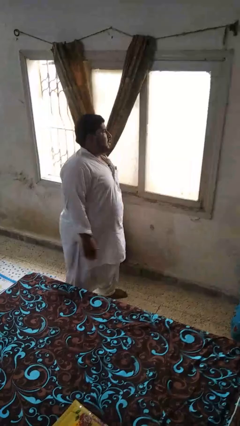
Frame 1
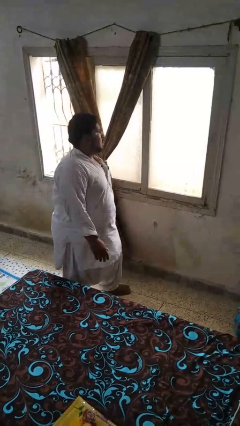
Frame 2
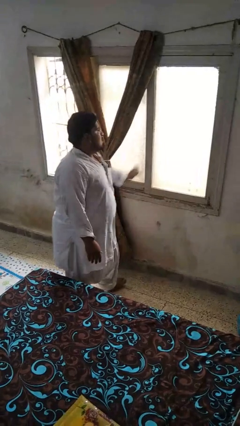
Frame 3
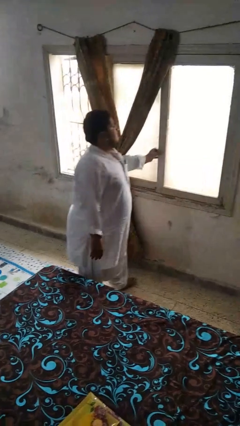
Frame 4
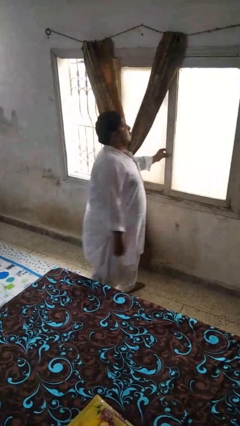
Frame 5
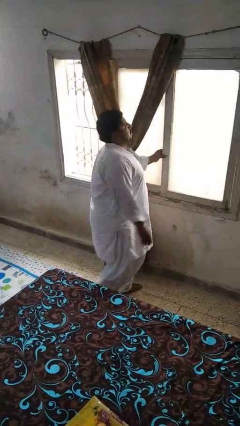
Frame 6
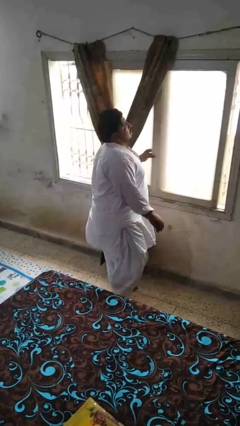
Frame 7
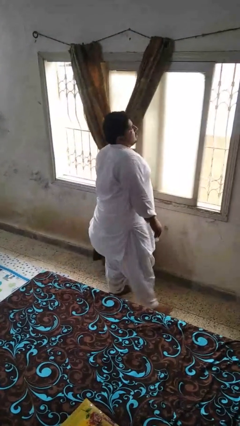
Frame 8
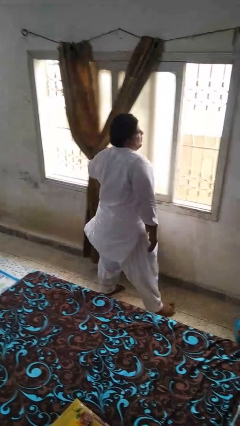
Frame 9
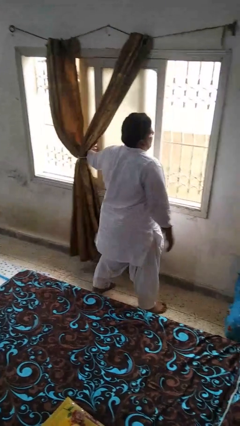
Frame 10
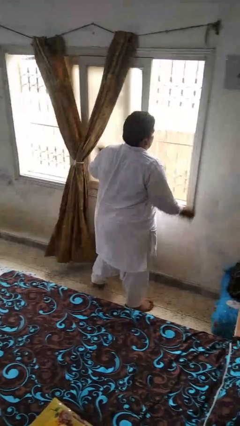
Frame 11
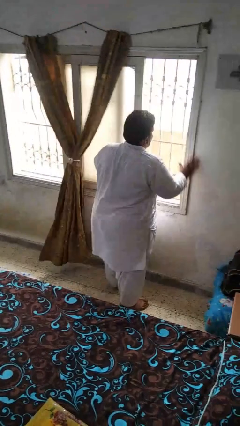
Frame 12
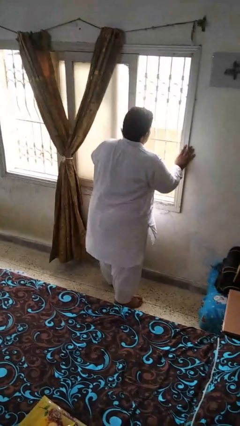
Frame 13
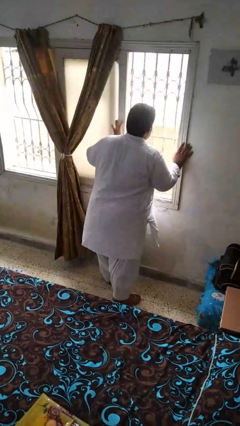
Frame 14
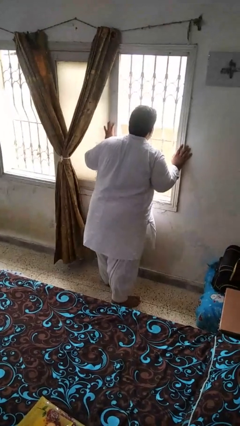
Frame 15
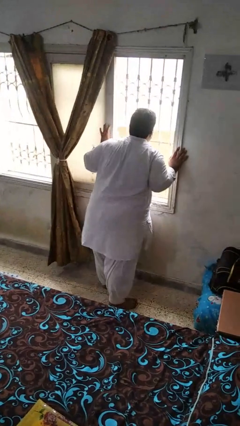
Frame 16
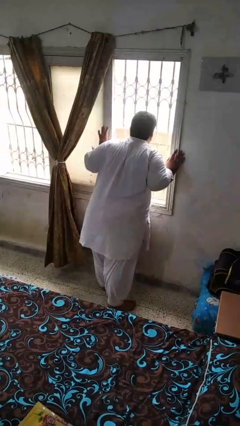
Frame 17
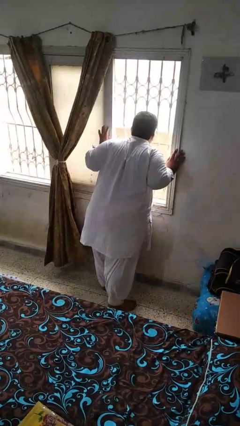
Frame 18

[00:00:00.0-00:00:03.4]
person opens home window

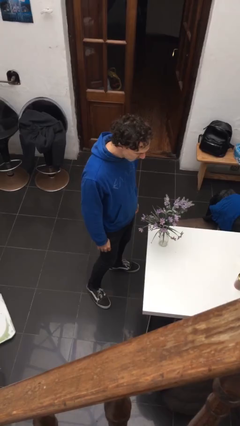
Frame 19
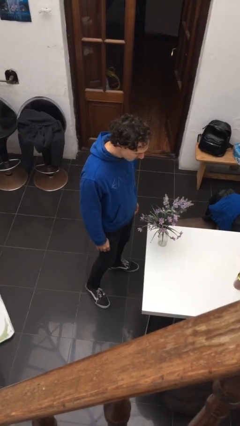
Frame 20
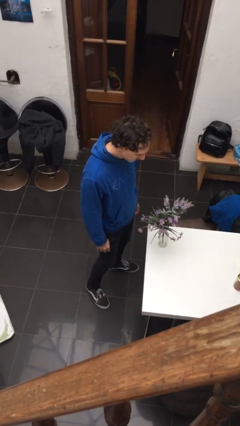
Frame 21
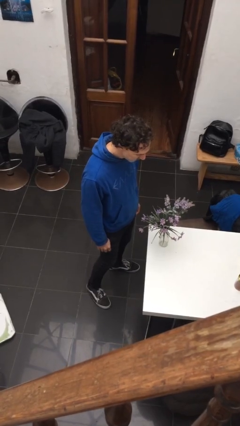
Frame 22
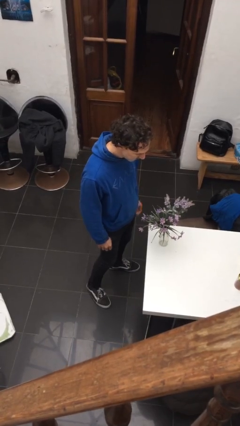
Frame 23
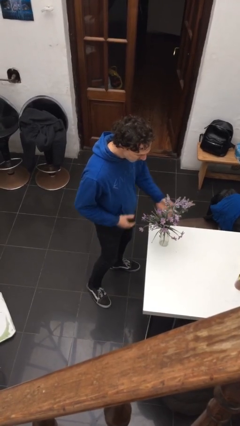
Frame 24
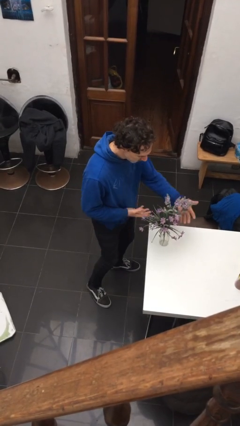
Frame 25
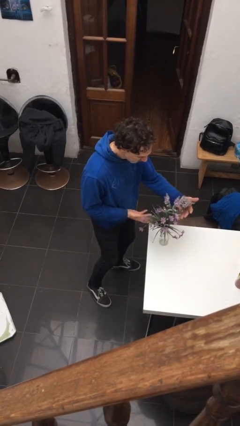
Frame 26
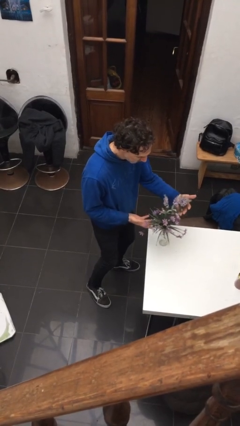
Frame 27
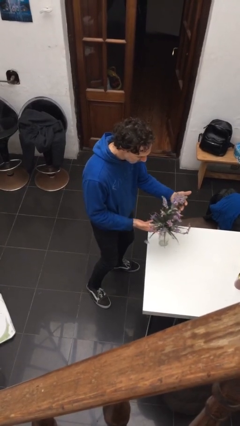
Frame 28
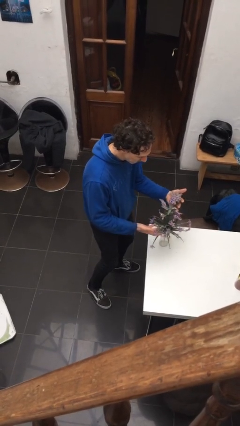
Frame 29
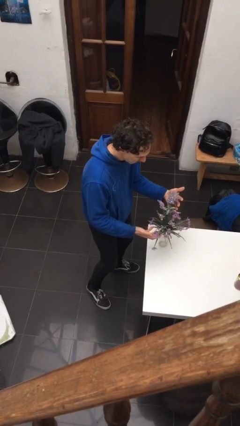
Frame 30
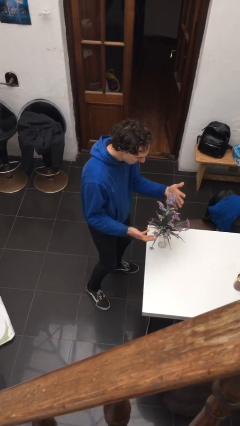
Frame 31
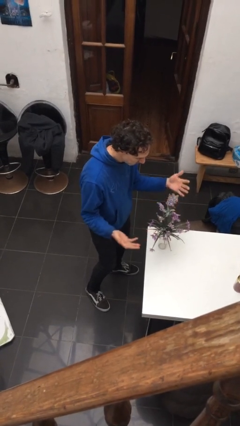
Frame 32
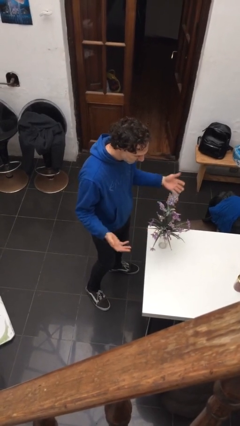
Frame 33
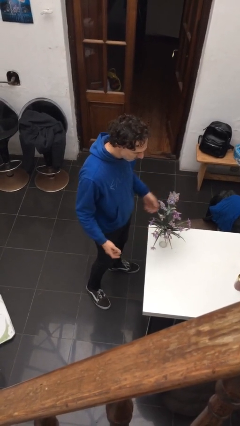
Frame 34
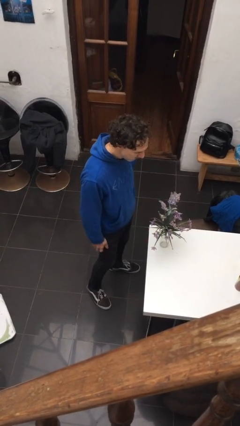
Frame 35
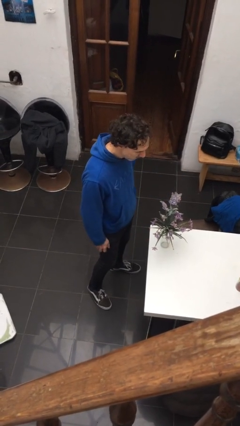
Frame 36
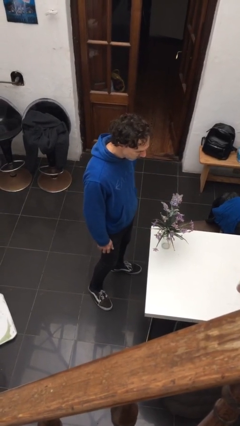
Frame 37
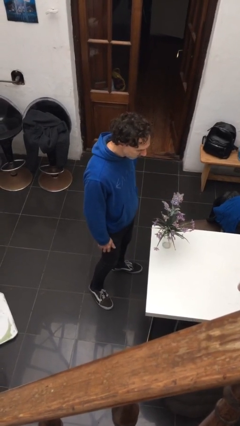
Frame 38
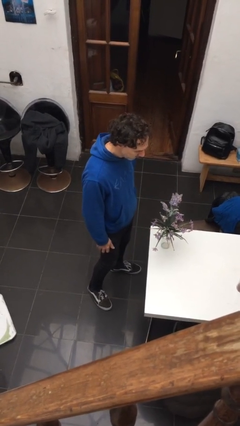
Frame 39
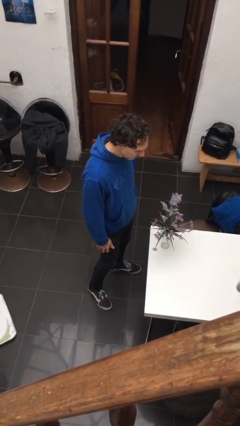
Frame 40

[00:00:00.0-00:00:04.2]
person arranges flowers in vase

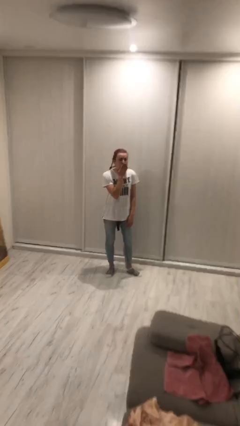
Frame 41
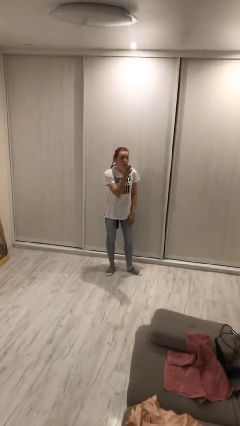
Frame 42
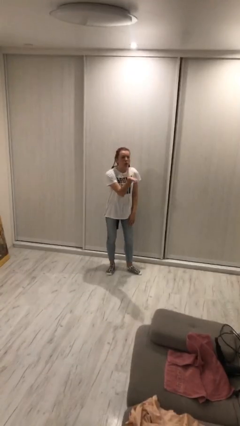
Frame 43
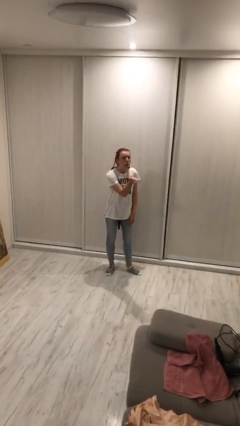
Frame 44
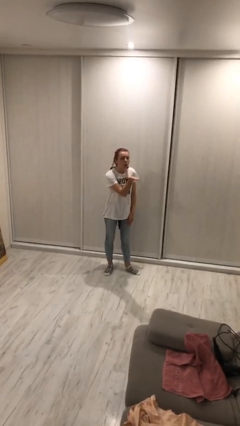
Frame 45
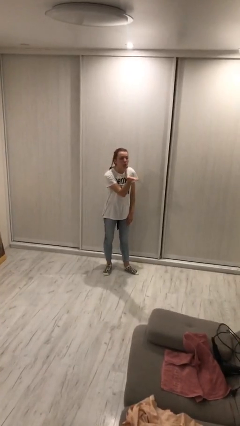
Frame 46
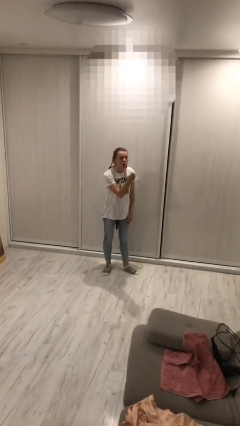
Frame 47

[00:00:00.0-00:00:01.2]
person gestures blow kiss

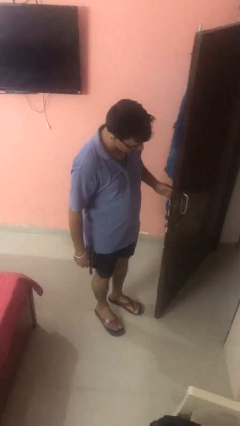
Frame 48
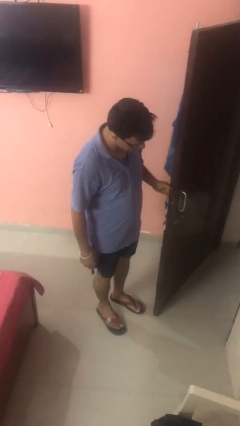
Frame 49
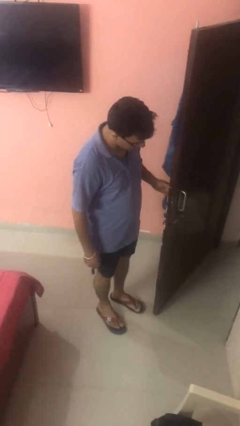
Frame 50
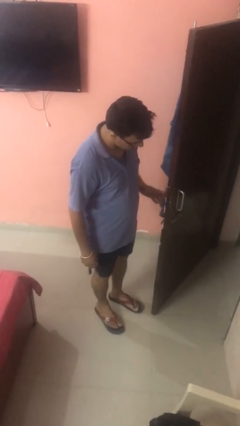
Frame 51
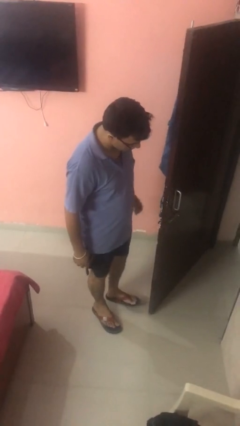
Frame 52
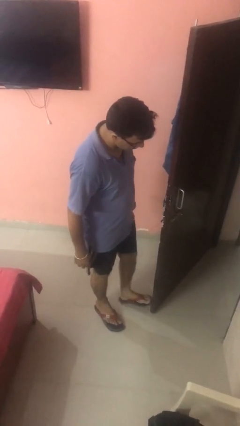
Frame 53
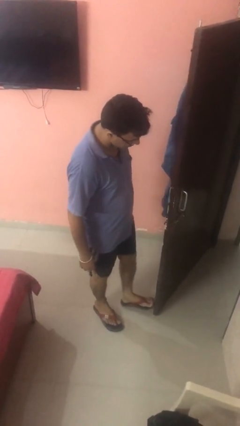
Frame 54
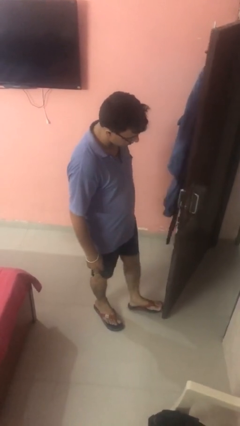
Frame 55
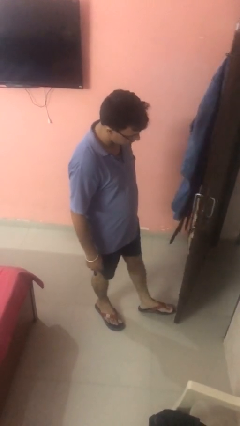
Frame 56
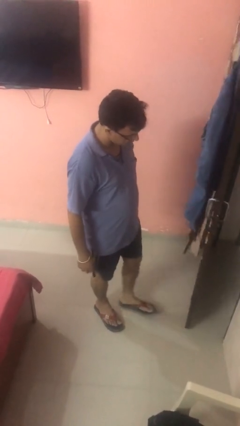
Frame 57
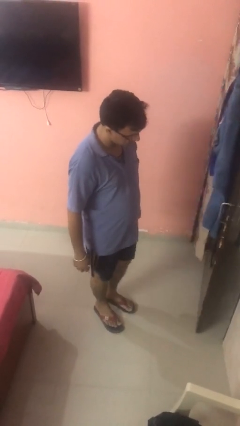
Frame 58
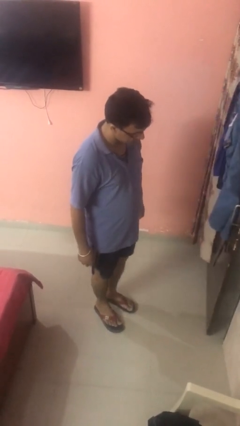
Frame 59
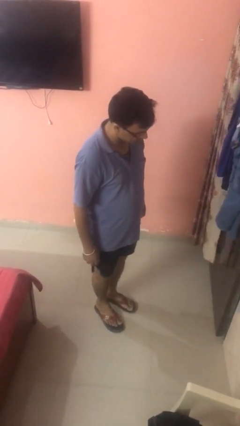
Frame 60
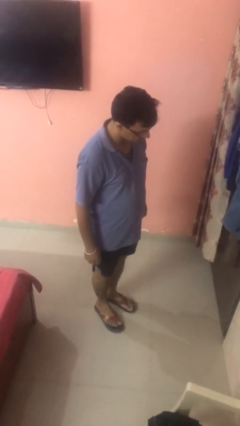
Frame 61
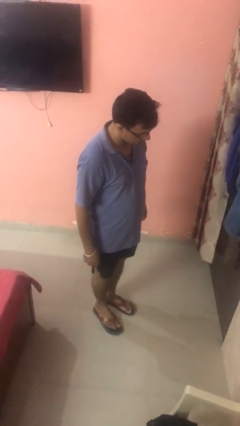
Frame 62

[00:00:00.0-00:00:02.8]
person closes door with foot

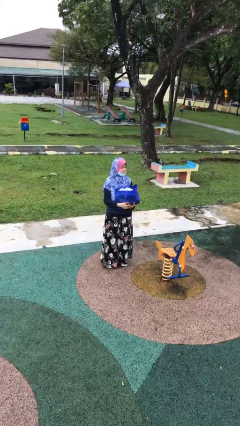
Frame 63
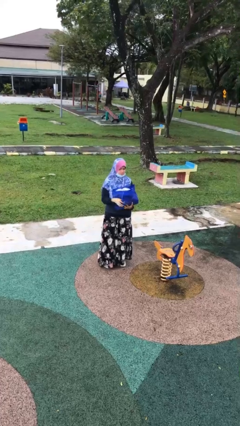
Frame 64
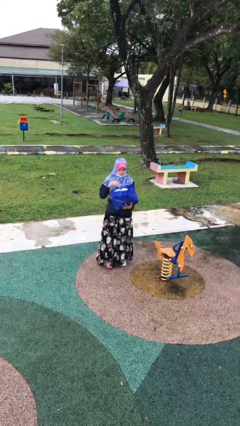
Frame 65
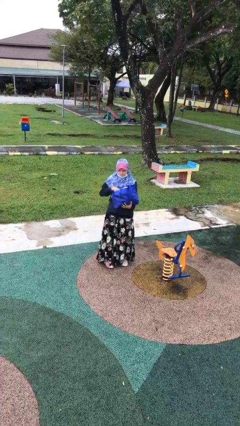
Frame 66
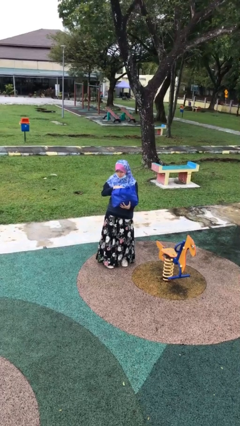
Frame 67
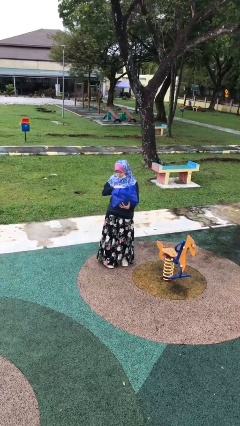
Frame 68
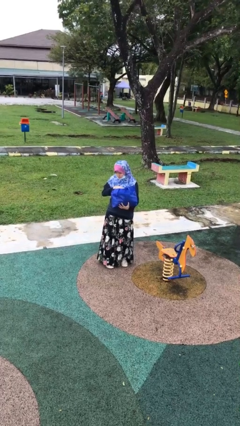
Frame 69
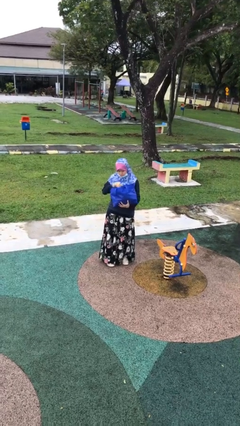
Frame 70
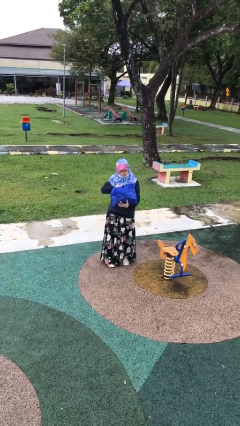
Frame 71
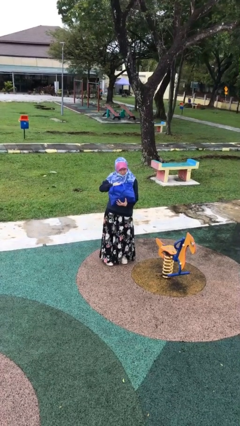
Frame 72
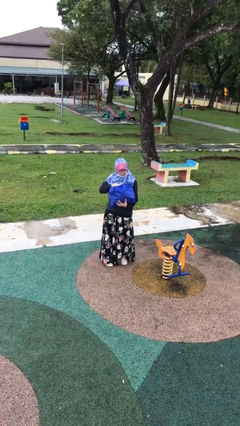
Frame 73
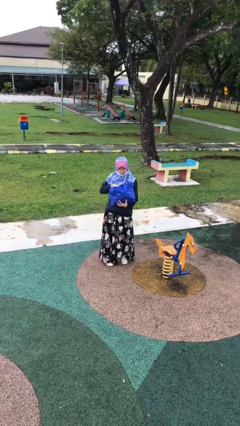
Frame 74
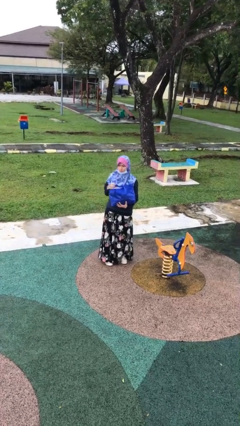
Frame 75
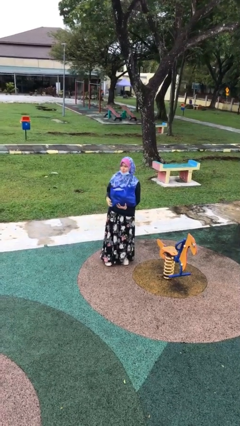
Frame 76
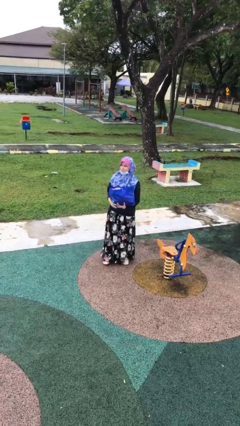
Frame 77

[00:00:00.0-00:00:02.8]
person searches in bag

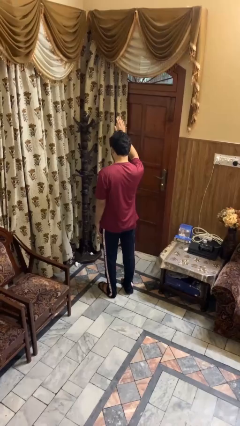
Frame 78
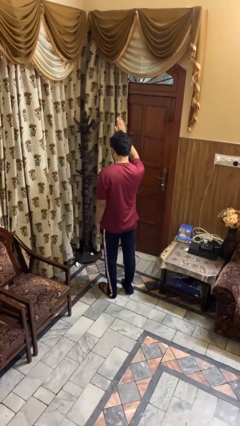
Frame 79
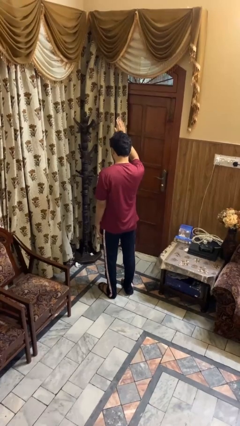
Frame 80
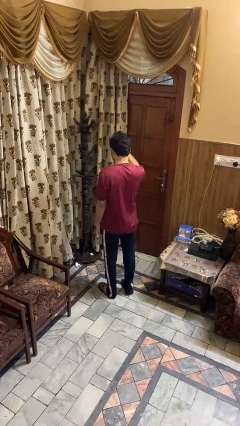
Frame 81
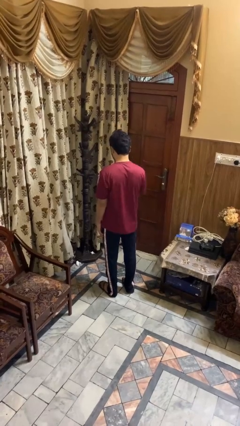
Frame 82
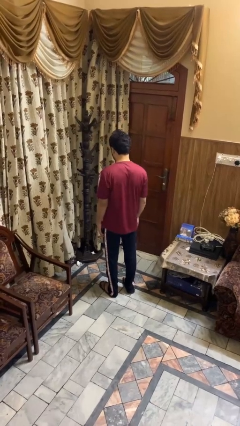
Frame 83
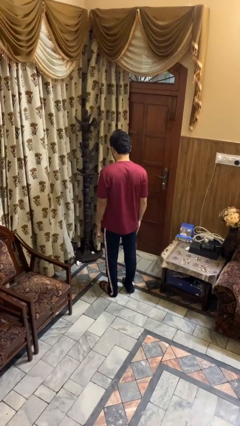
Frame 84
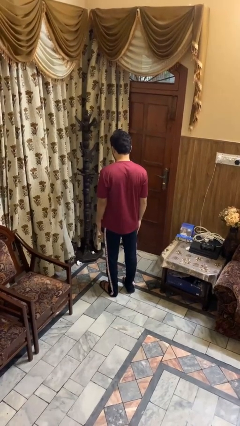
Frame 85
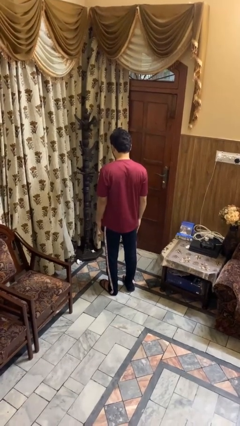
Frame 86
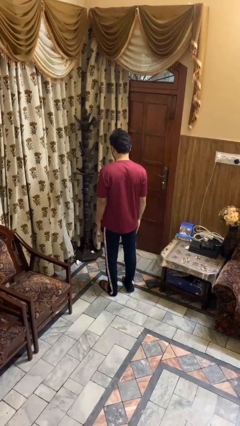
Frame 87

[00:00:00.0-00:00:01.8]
person gestures lower hand

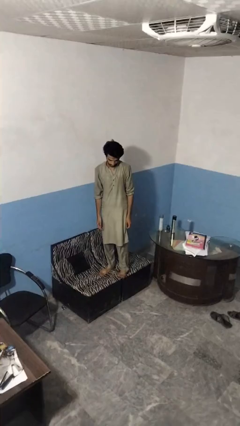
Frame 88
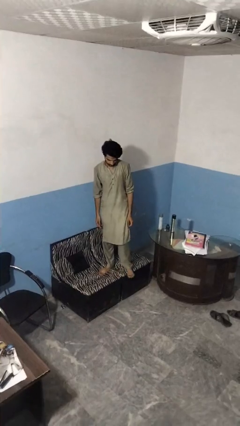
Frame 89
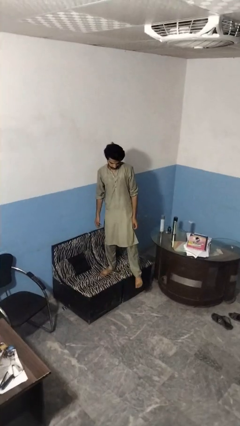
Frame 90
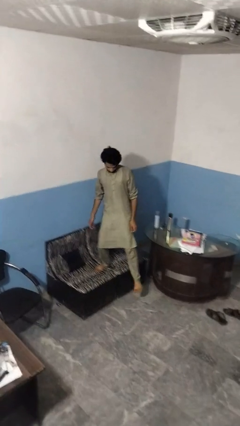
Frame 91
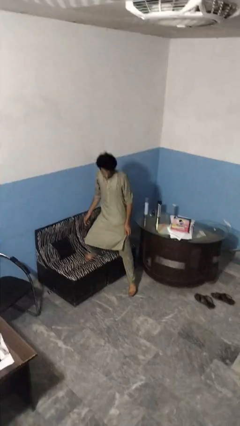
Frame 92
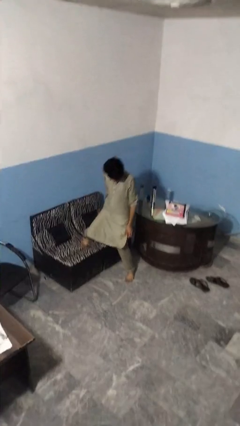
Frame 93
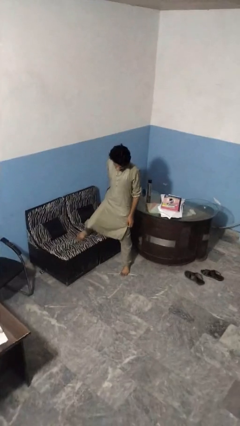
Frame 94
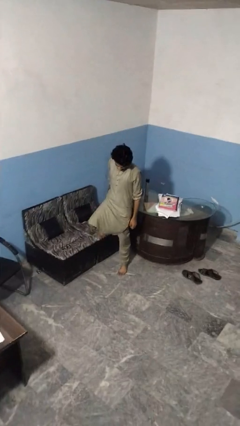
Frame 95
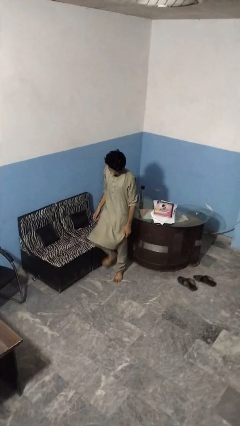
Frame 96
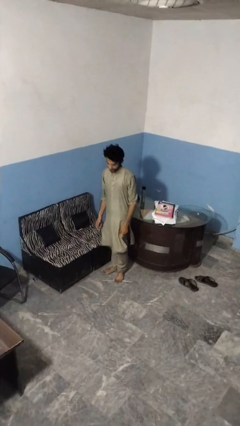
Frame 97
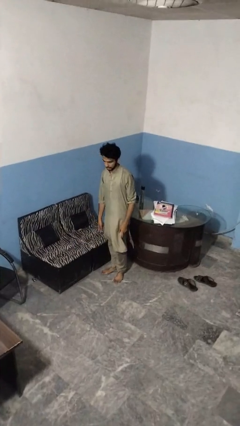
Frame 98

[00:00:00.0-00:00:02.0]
person climbs off couch
